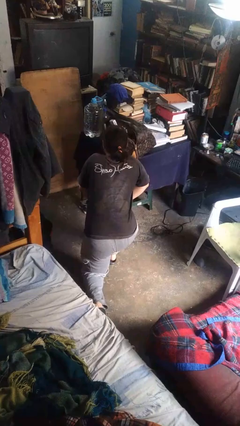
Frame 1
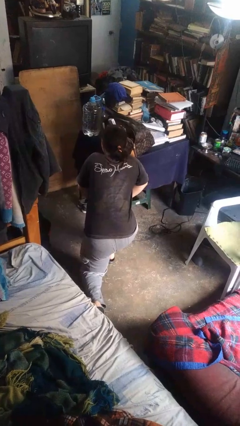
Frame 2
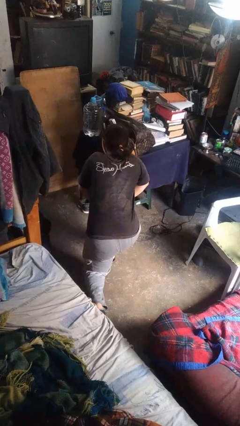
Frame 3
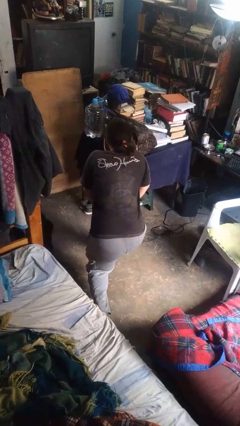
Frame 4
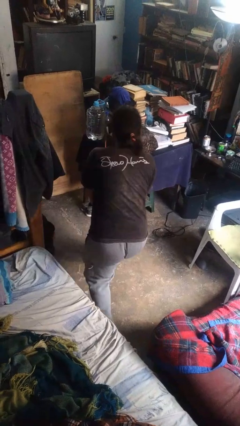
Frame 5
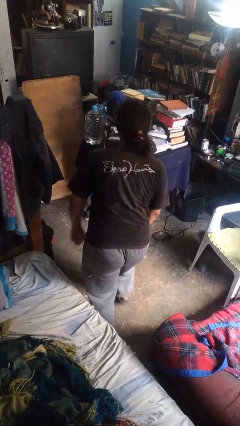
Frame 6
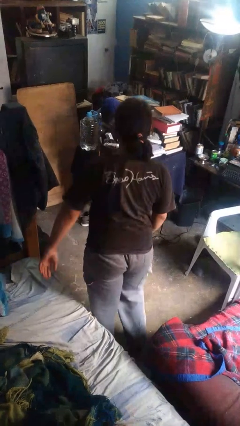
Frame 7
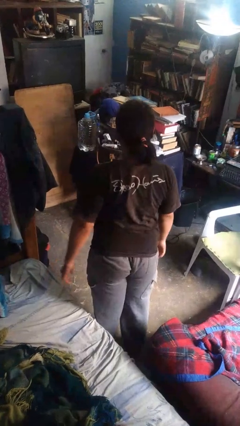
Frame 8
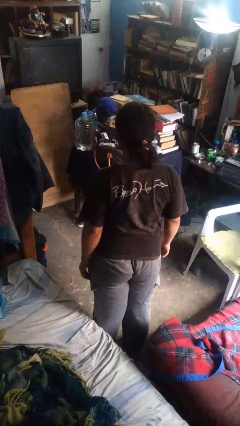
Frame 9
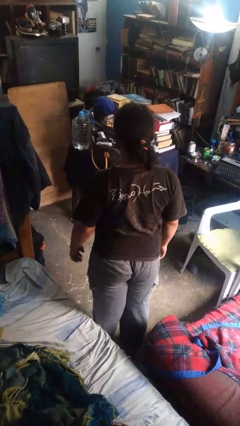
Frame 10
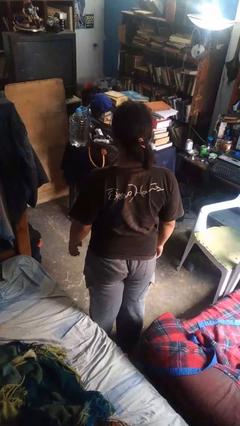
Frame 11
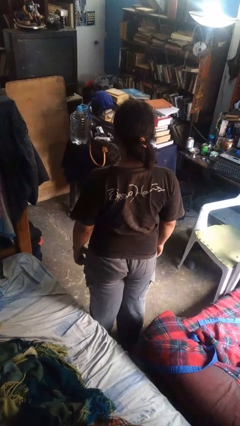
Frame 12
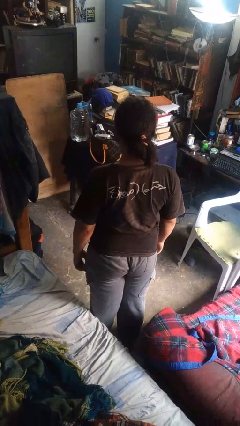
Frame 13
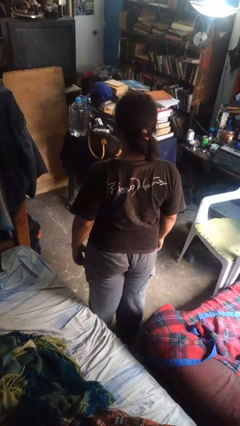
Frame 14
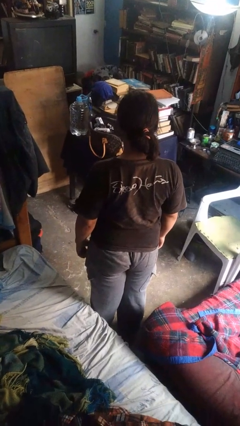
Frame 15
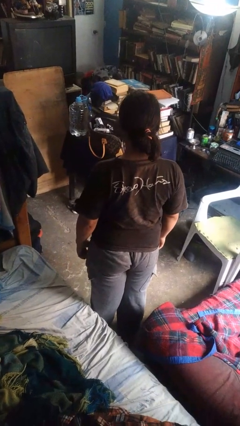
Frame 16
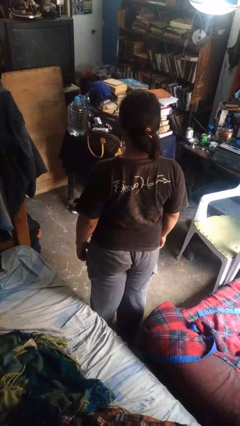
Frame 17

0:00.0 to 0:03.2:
person stands up from floor

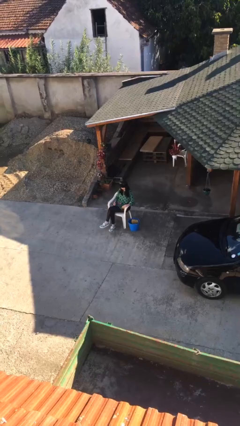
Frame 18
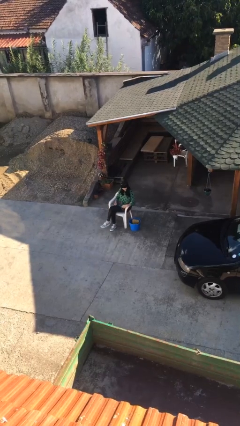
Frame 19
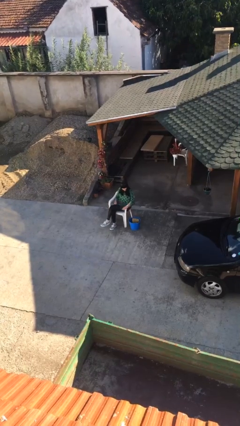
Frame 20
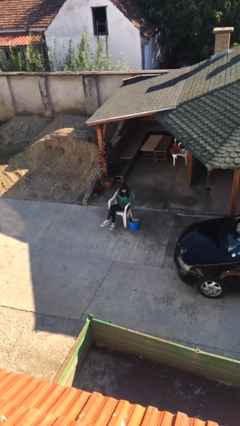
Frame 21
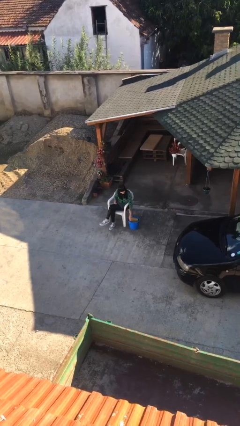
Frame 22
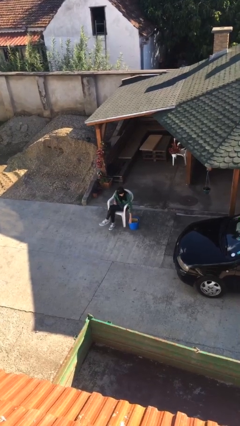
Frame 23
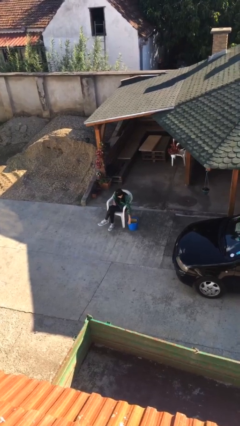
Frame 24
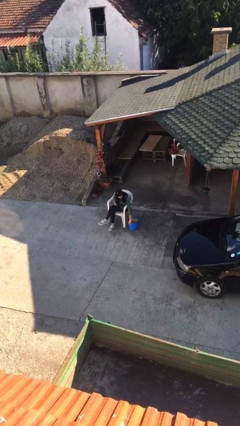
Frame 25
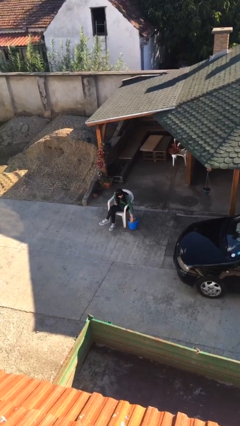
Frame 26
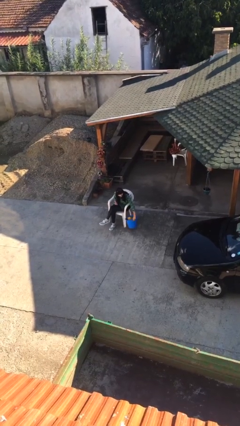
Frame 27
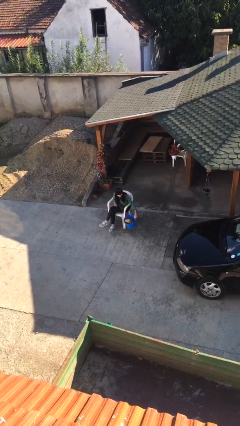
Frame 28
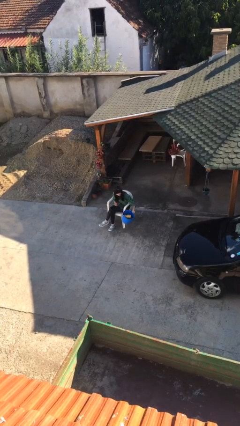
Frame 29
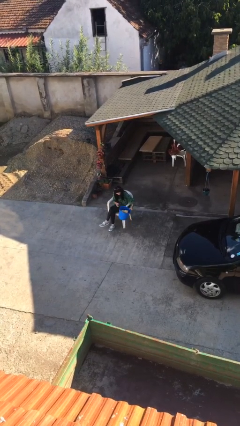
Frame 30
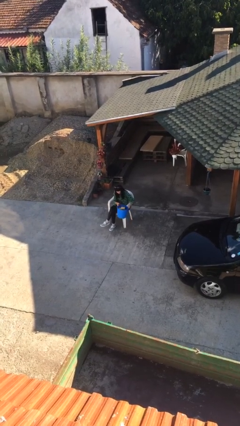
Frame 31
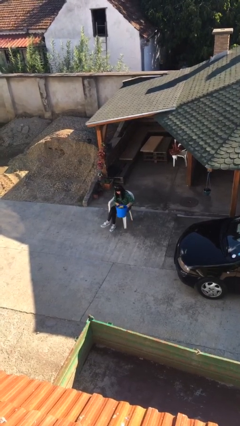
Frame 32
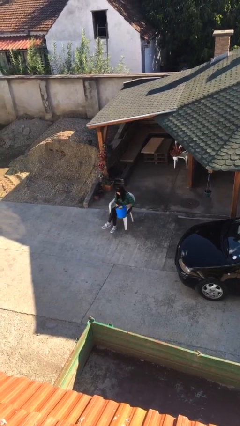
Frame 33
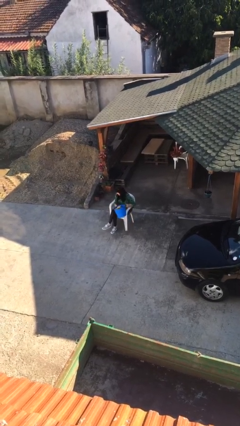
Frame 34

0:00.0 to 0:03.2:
person picks up object from floor

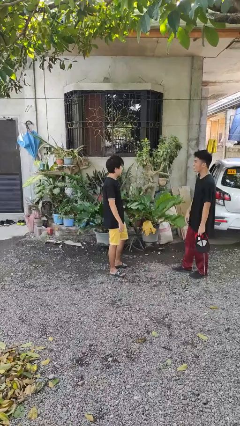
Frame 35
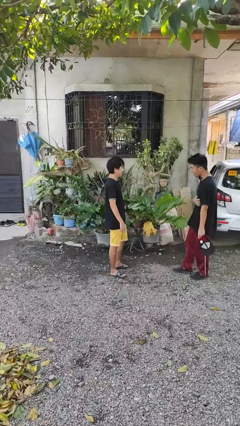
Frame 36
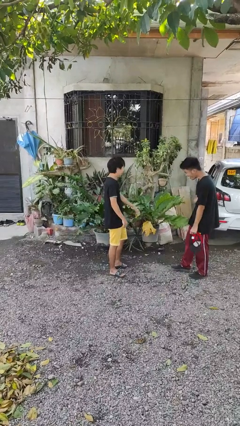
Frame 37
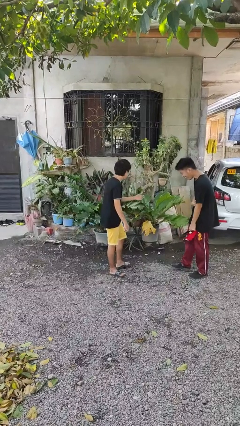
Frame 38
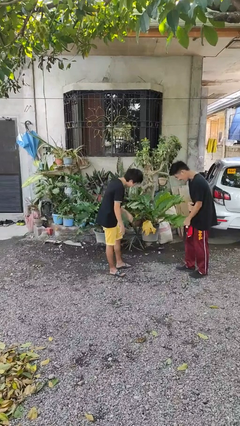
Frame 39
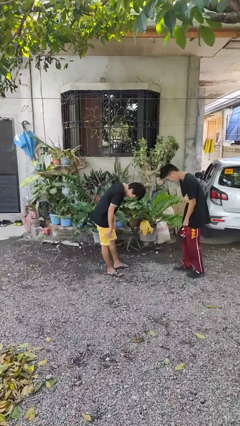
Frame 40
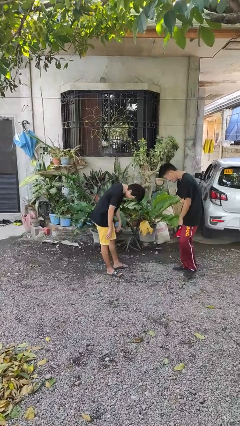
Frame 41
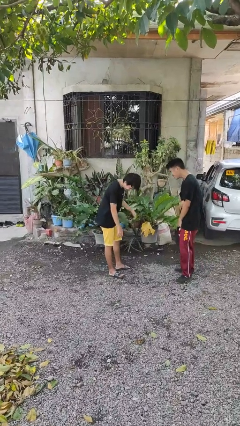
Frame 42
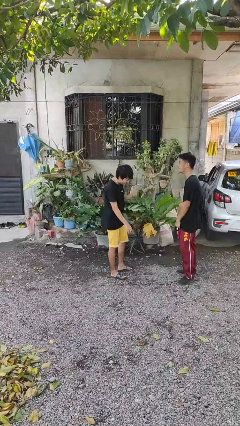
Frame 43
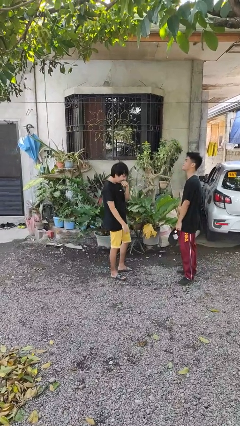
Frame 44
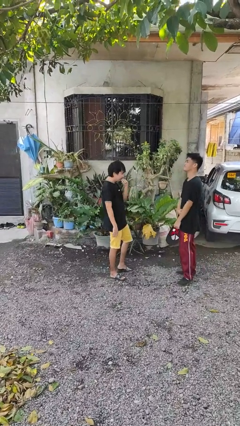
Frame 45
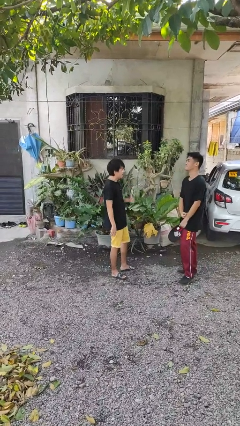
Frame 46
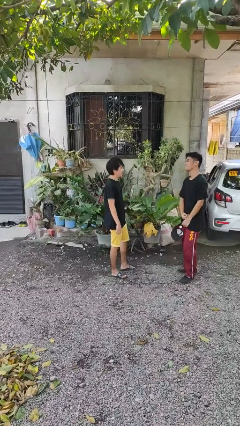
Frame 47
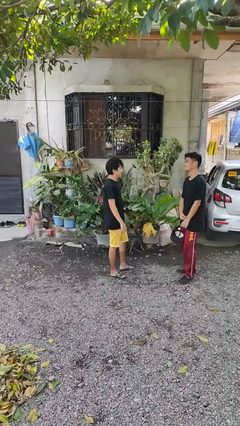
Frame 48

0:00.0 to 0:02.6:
person laughs with person

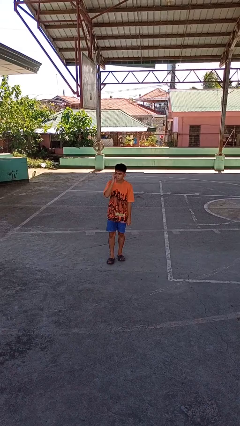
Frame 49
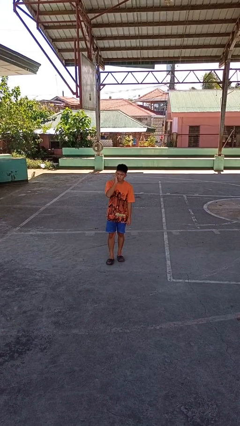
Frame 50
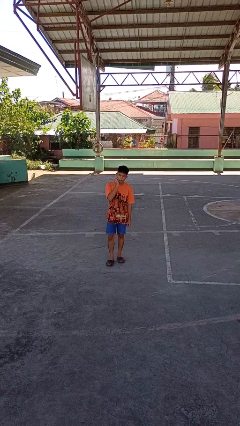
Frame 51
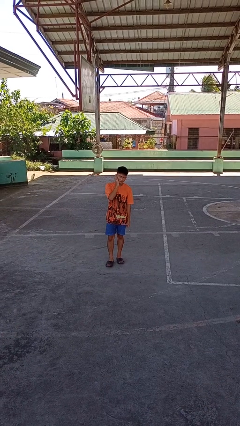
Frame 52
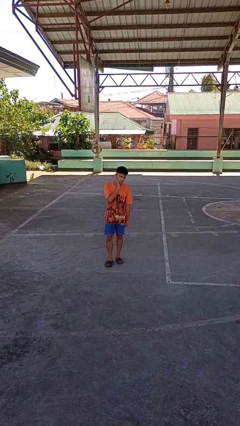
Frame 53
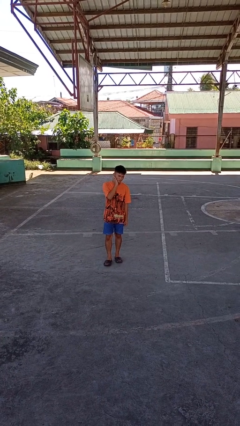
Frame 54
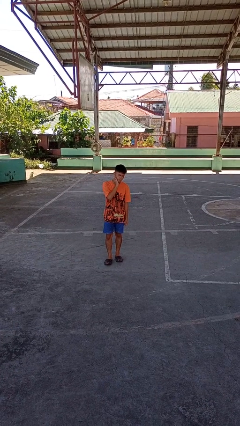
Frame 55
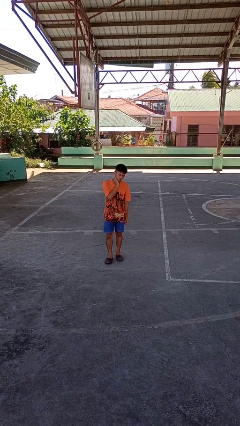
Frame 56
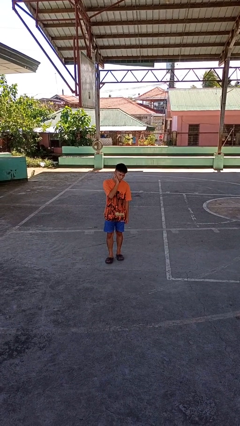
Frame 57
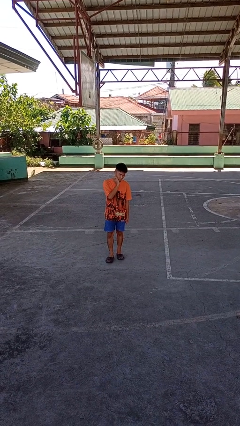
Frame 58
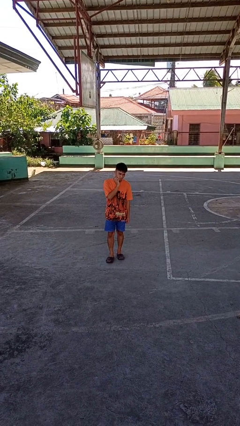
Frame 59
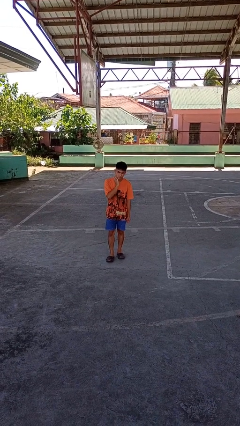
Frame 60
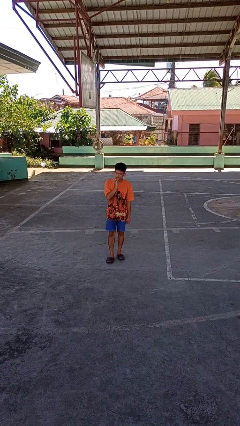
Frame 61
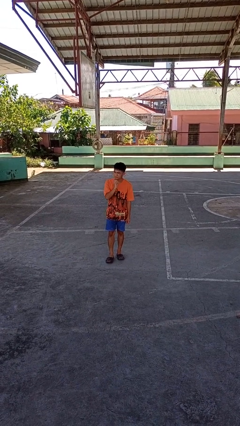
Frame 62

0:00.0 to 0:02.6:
person scratches face

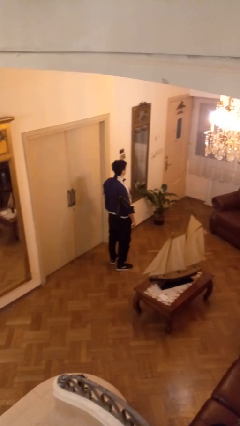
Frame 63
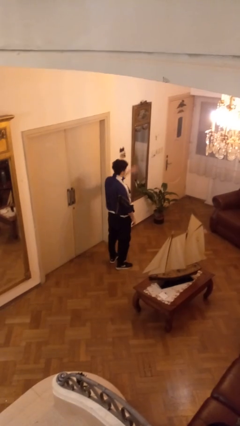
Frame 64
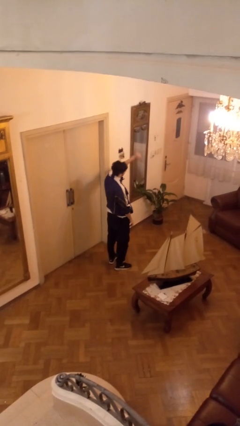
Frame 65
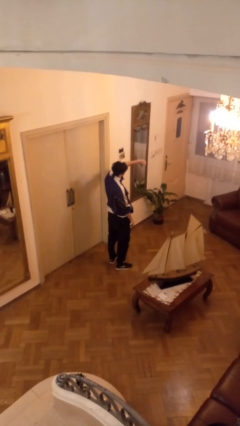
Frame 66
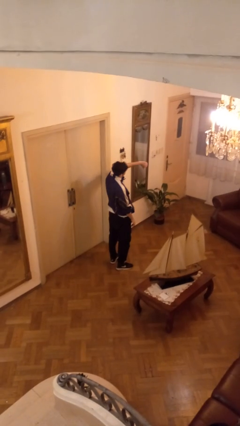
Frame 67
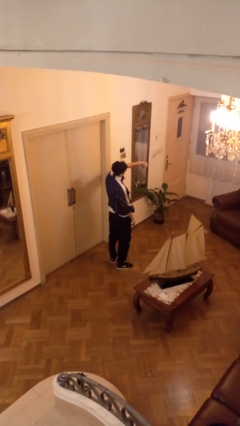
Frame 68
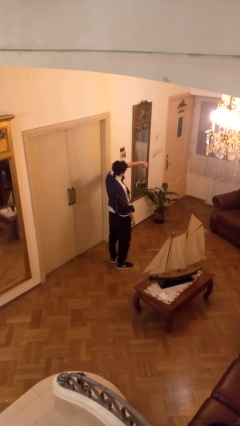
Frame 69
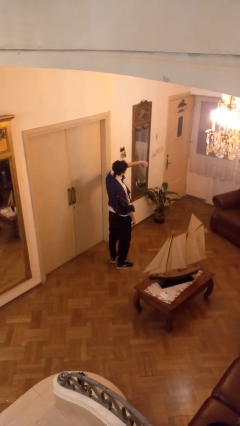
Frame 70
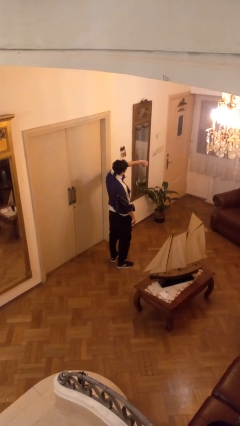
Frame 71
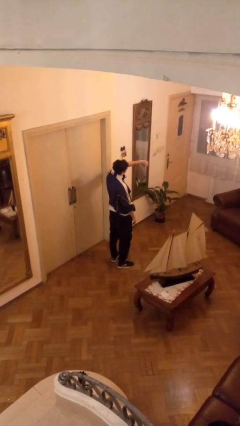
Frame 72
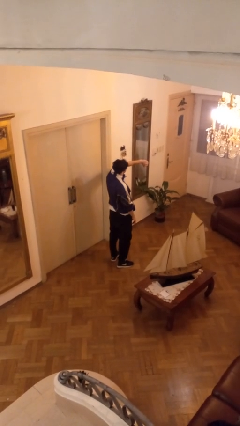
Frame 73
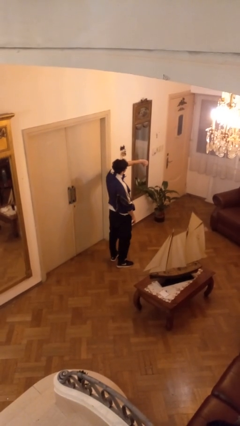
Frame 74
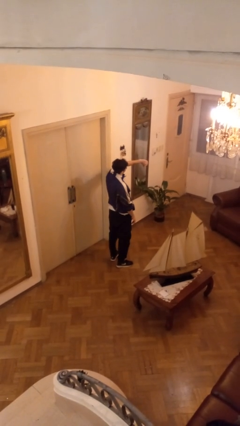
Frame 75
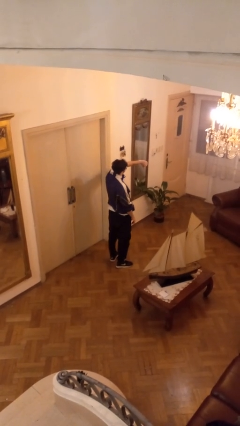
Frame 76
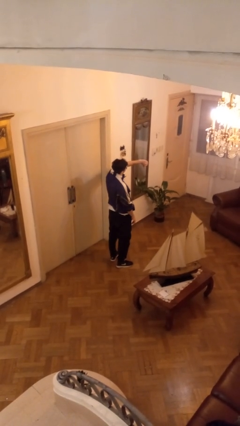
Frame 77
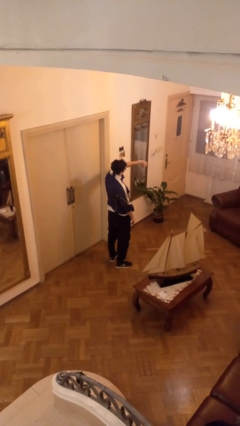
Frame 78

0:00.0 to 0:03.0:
person gestures thumbs down

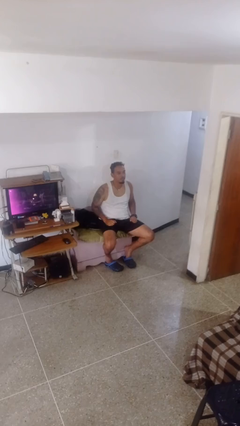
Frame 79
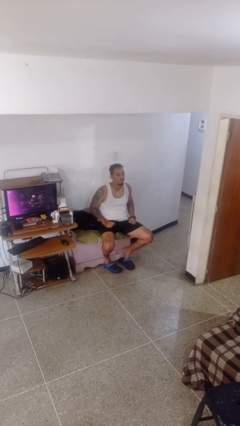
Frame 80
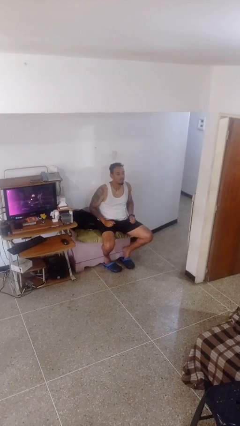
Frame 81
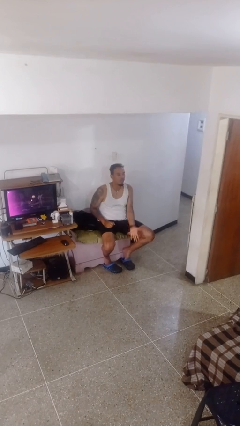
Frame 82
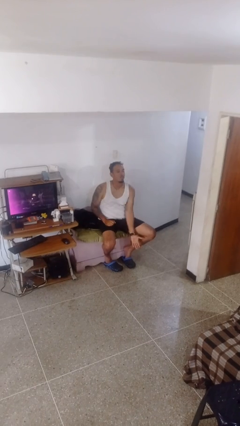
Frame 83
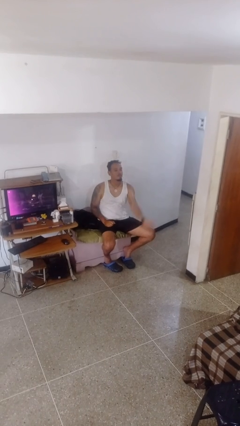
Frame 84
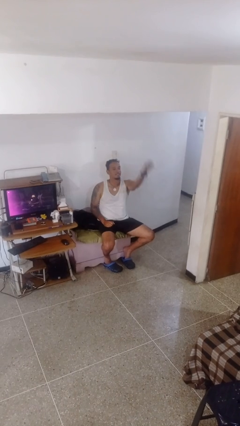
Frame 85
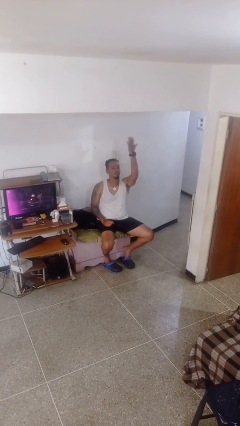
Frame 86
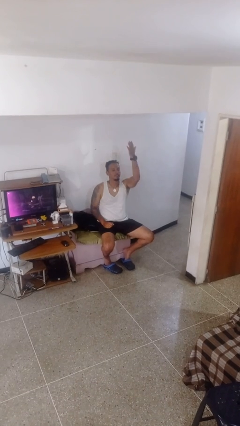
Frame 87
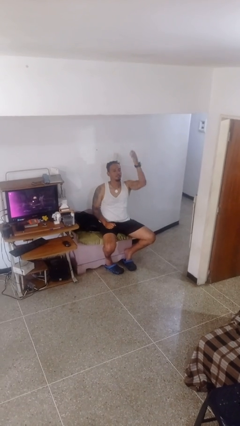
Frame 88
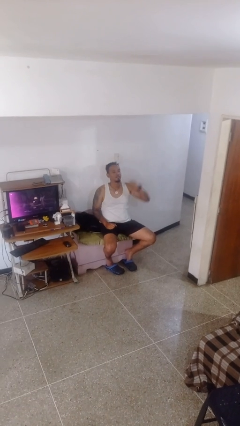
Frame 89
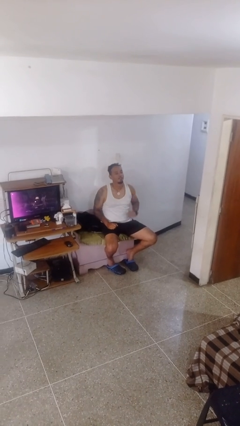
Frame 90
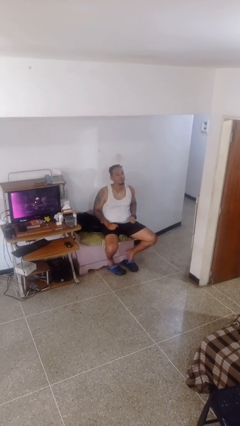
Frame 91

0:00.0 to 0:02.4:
person gestures swipe up

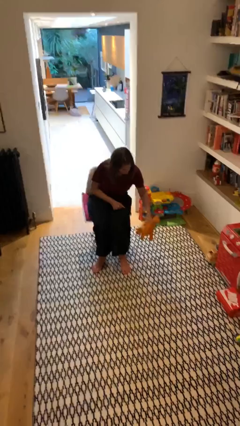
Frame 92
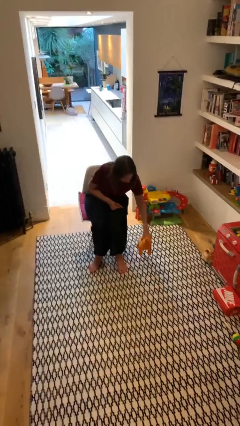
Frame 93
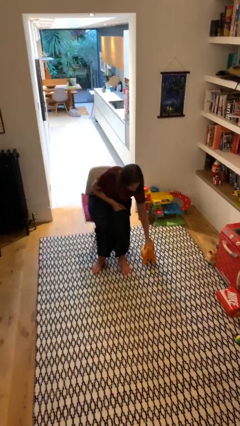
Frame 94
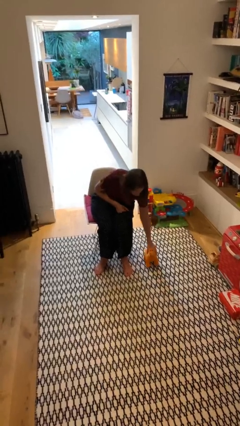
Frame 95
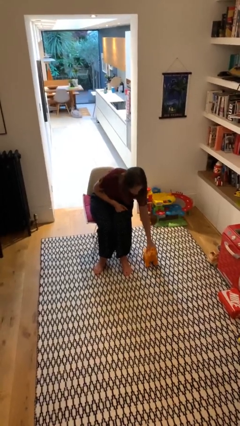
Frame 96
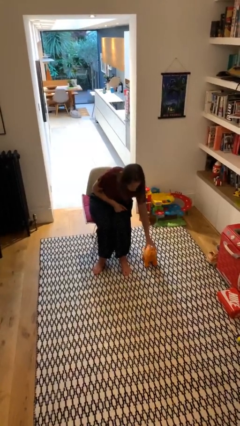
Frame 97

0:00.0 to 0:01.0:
person puts down object on floor
